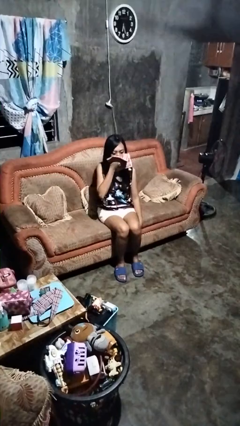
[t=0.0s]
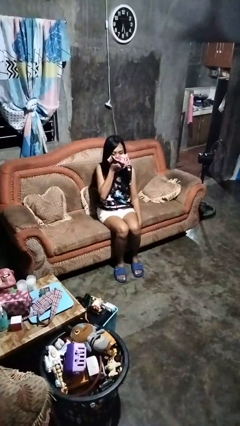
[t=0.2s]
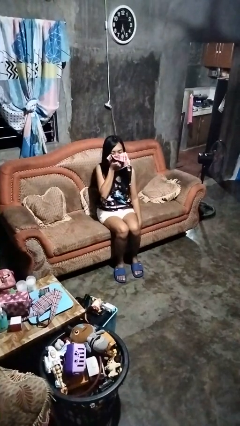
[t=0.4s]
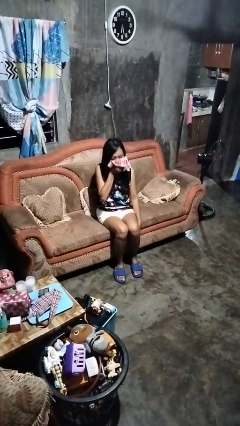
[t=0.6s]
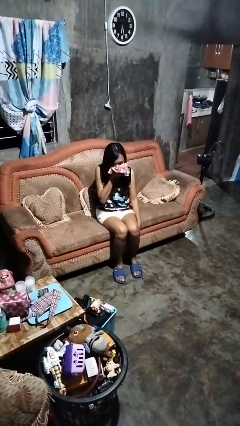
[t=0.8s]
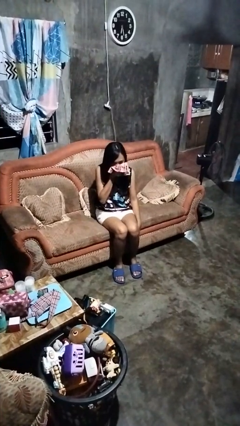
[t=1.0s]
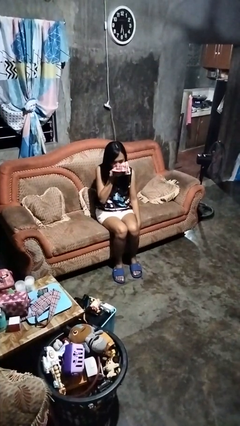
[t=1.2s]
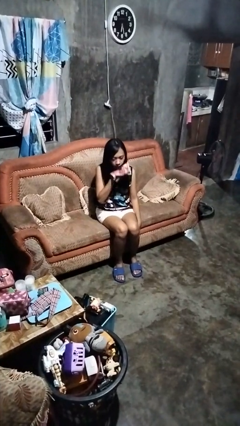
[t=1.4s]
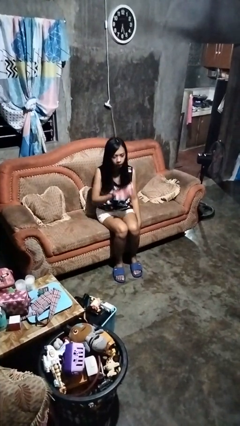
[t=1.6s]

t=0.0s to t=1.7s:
person blows nose

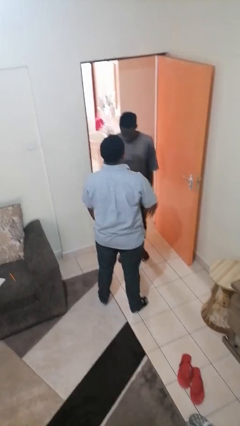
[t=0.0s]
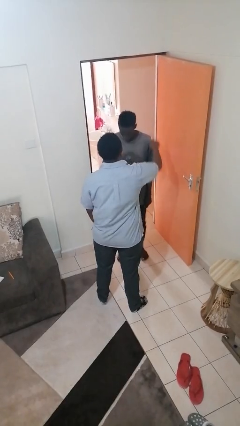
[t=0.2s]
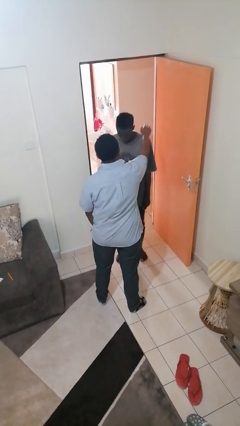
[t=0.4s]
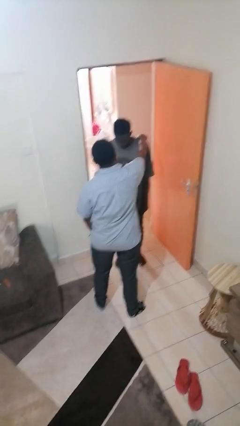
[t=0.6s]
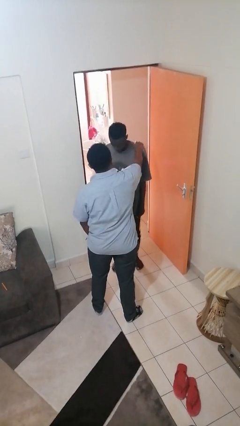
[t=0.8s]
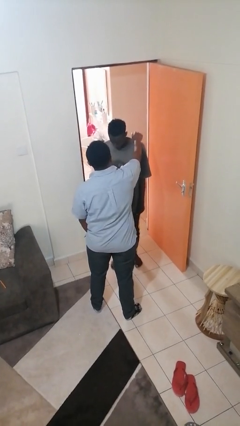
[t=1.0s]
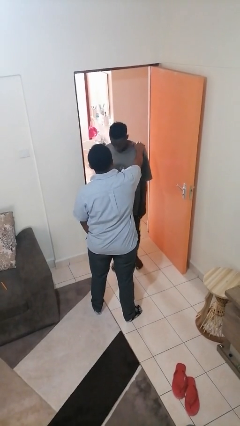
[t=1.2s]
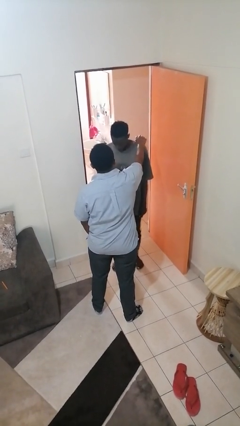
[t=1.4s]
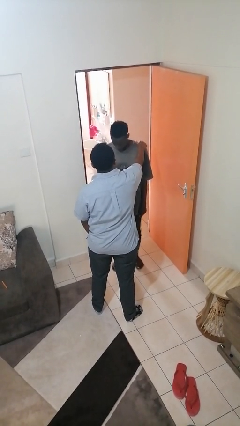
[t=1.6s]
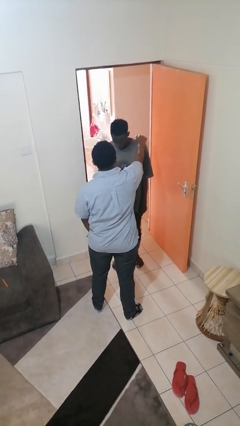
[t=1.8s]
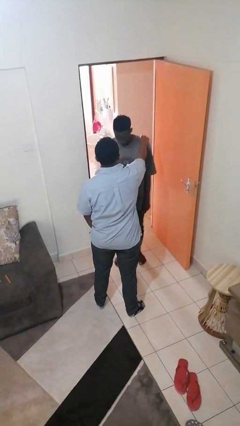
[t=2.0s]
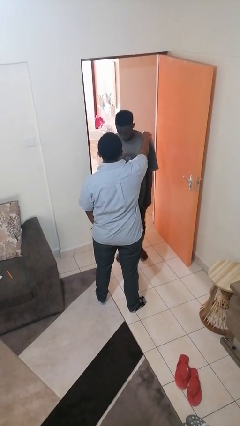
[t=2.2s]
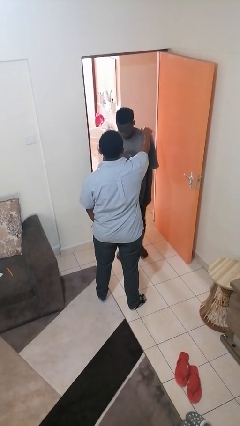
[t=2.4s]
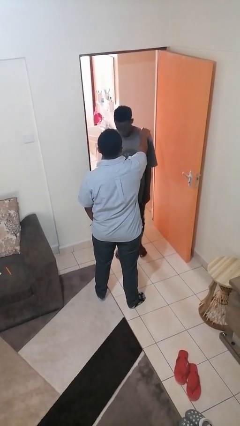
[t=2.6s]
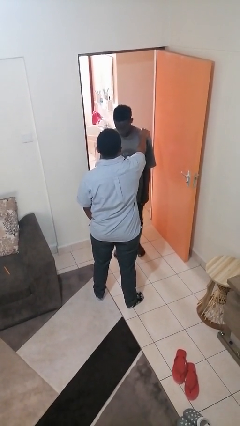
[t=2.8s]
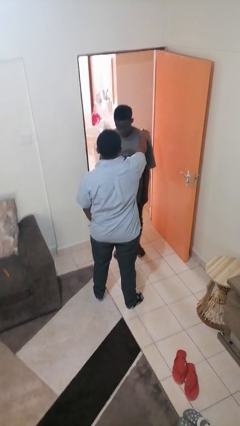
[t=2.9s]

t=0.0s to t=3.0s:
person pounds shoulders of person

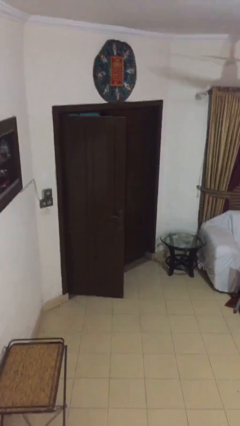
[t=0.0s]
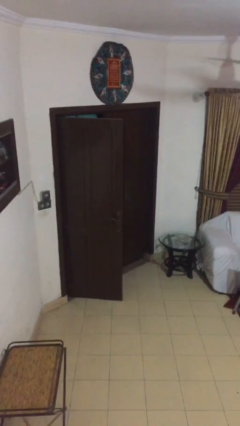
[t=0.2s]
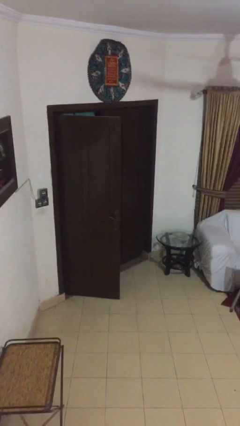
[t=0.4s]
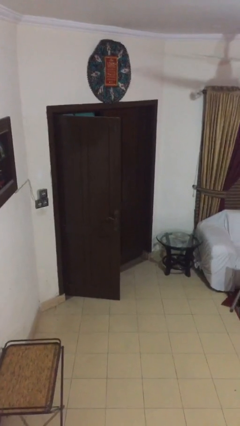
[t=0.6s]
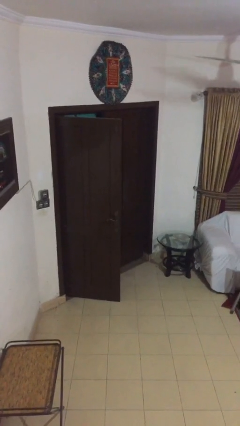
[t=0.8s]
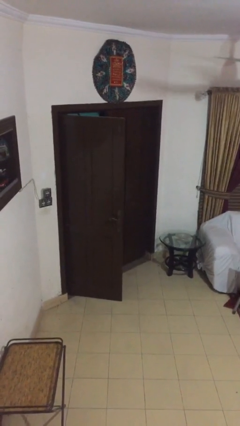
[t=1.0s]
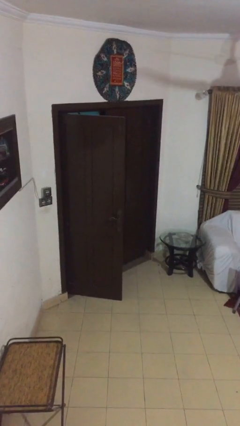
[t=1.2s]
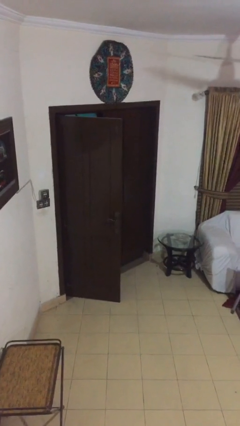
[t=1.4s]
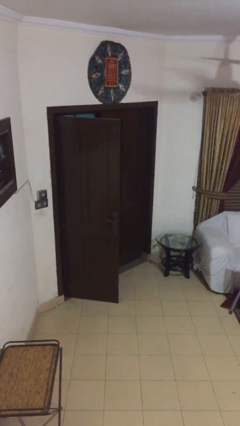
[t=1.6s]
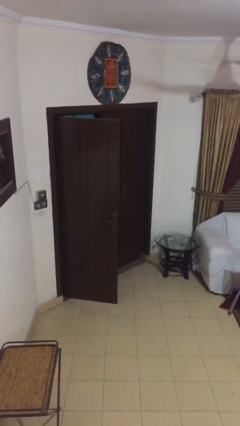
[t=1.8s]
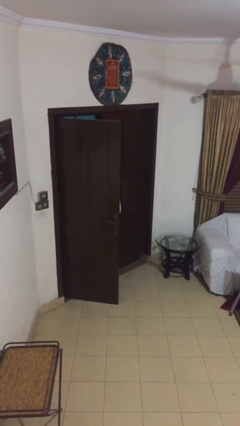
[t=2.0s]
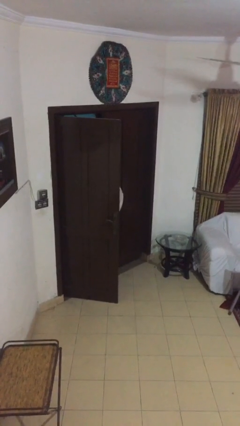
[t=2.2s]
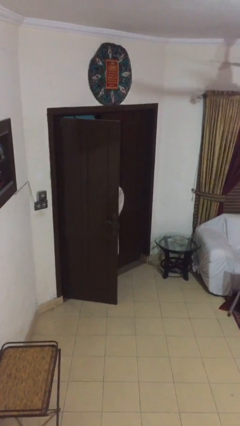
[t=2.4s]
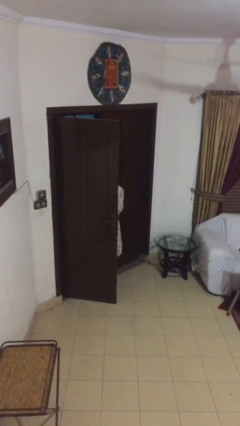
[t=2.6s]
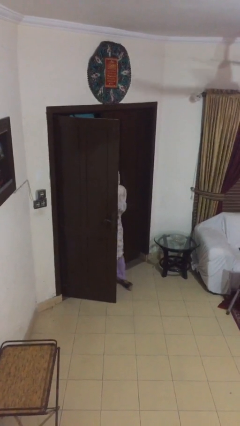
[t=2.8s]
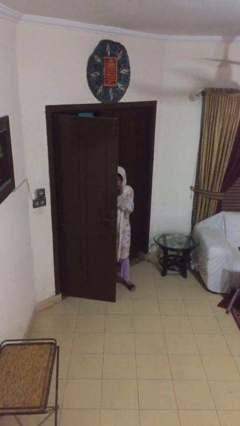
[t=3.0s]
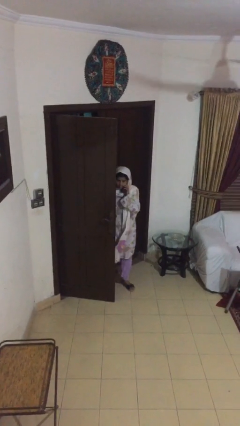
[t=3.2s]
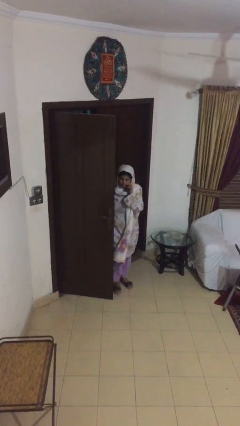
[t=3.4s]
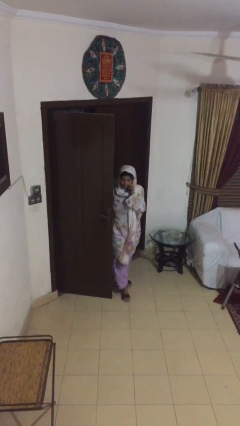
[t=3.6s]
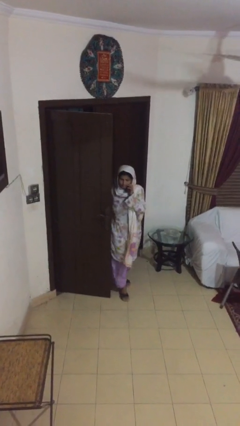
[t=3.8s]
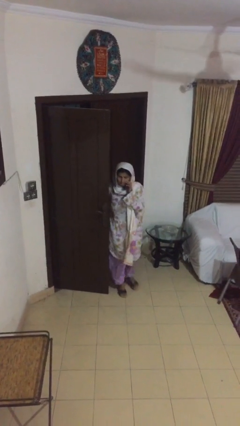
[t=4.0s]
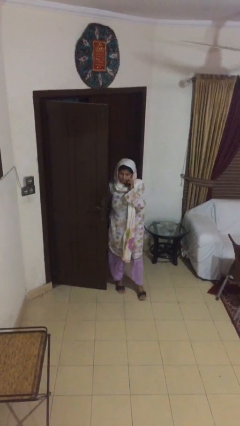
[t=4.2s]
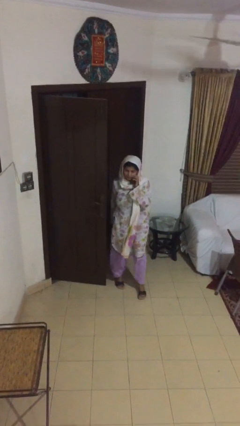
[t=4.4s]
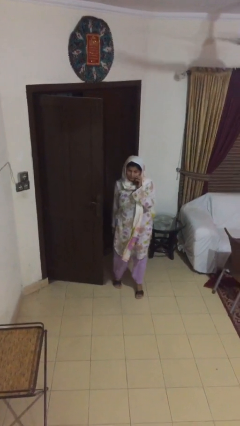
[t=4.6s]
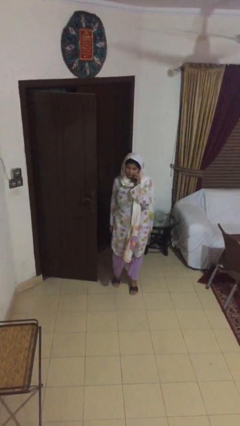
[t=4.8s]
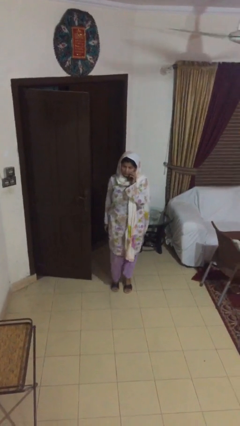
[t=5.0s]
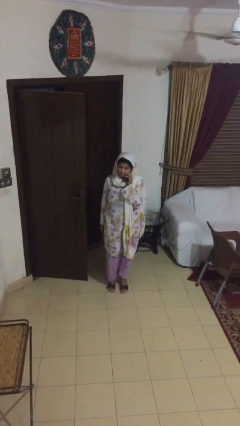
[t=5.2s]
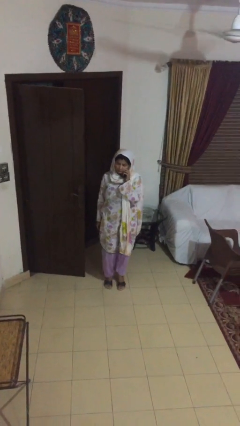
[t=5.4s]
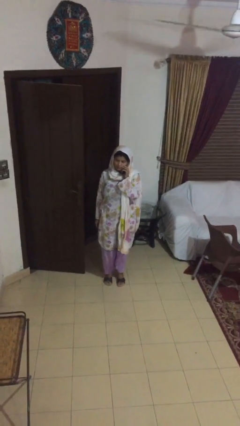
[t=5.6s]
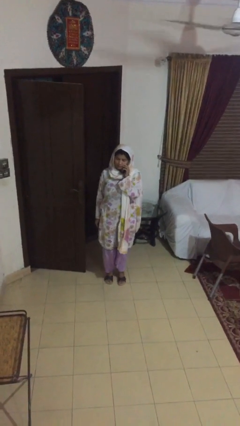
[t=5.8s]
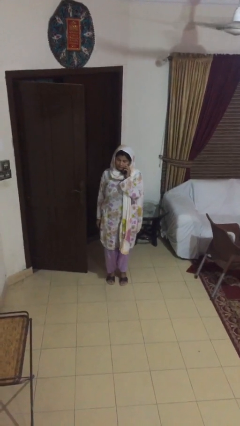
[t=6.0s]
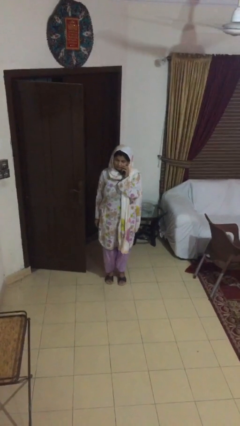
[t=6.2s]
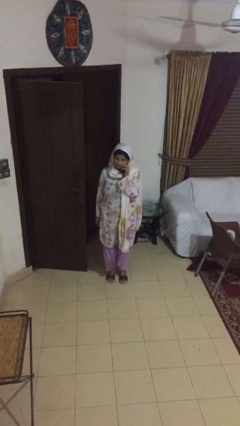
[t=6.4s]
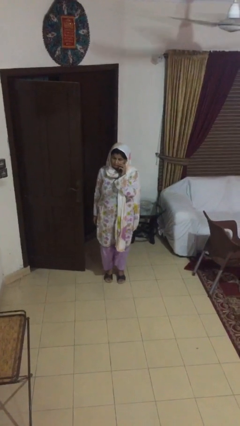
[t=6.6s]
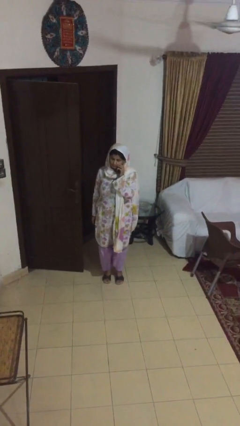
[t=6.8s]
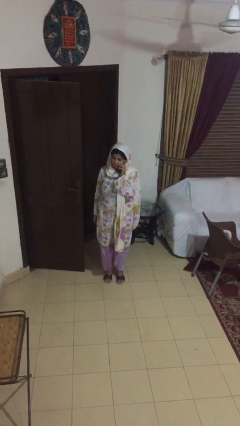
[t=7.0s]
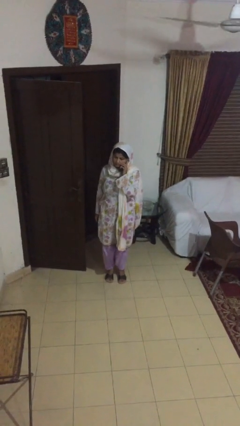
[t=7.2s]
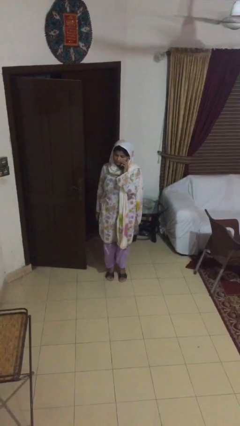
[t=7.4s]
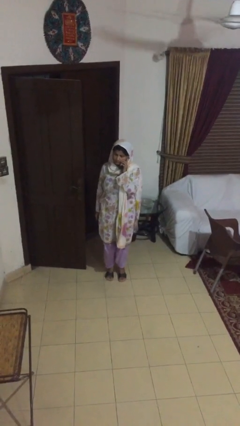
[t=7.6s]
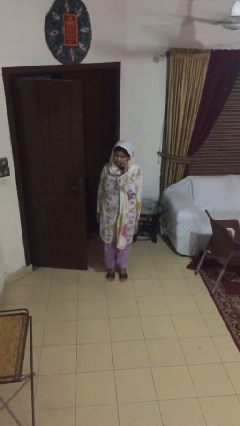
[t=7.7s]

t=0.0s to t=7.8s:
person enters scene through structure

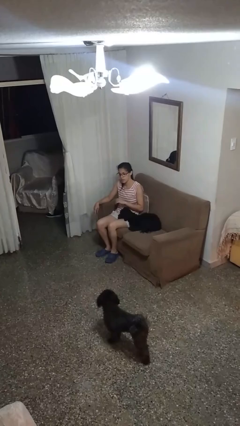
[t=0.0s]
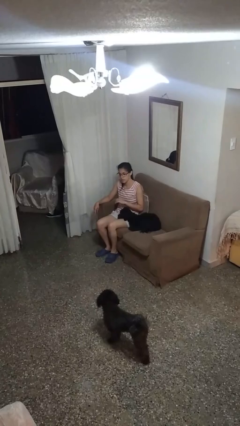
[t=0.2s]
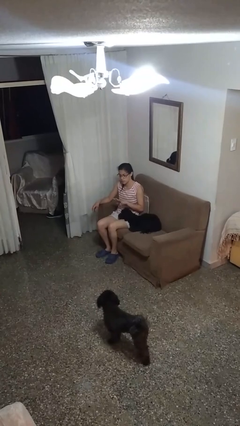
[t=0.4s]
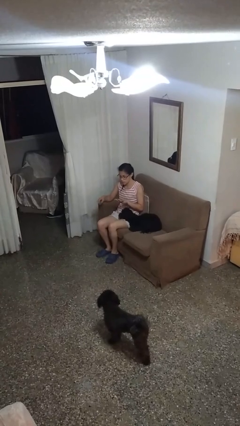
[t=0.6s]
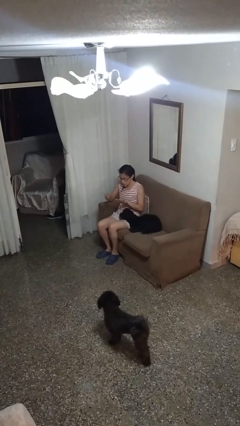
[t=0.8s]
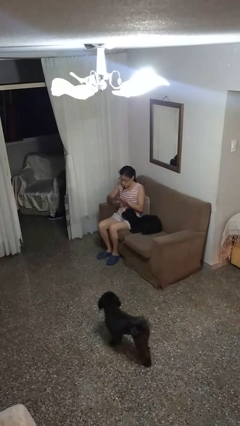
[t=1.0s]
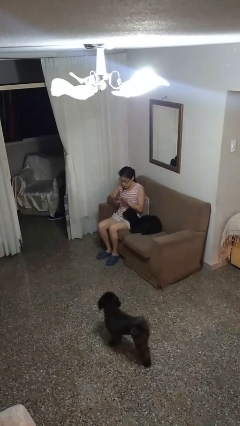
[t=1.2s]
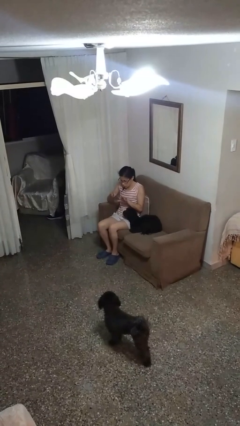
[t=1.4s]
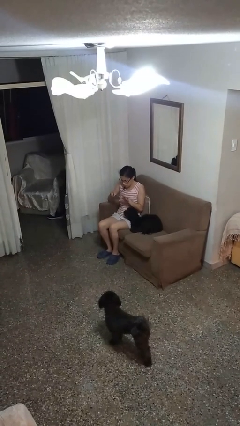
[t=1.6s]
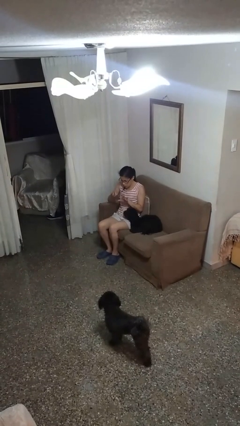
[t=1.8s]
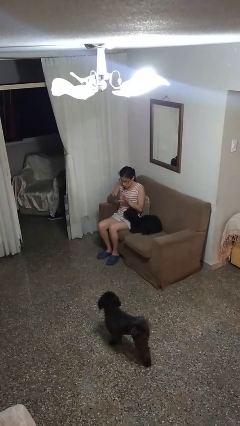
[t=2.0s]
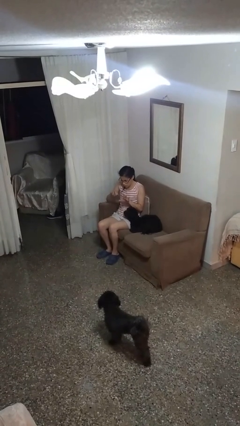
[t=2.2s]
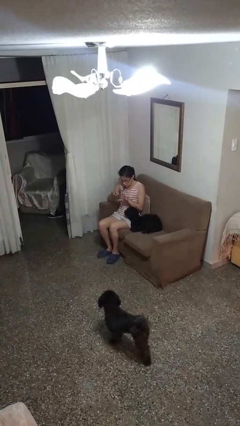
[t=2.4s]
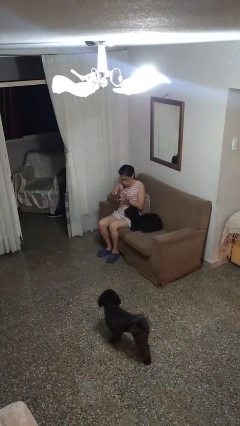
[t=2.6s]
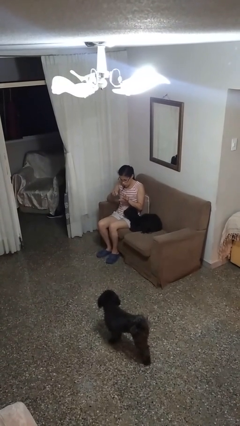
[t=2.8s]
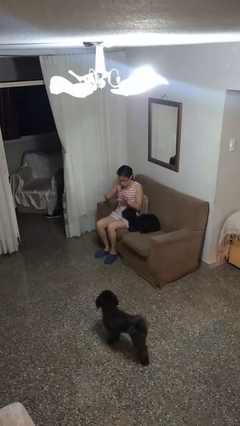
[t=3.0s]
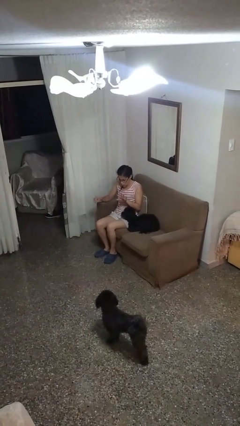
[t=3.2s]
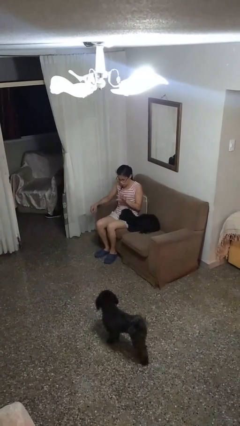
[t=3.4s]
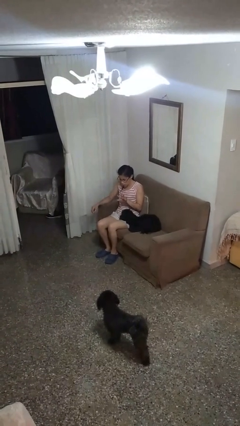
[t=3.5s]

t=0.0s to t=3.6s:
person files fingernails

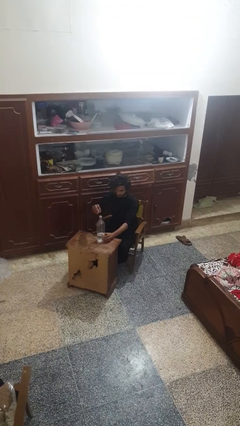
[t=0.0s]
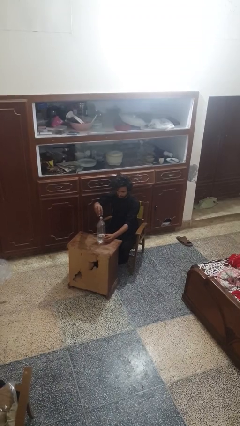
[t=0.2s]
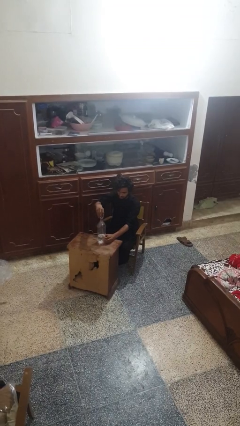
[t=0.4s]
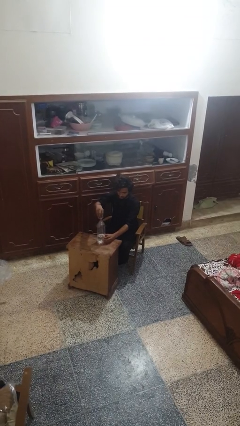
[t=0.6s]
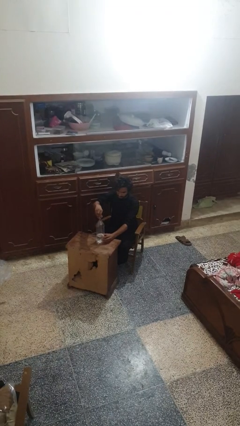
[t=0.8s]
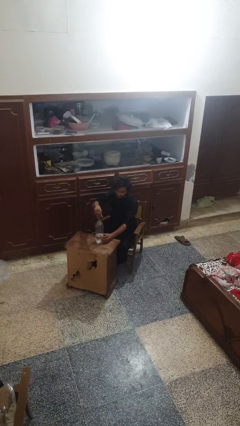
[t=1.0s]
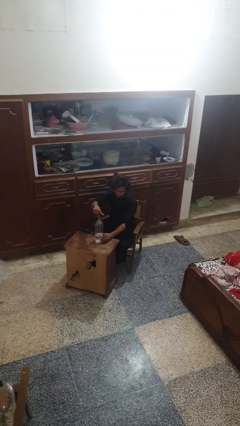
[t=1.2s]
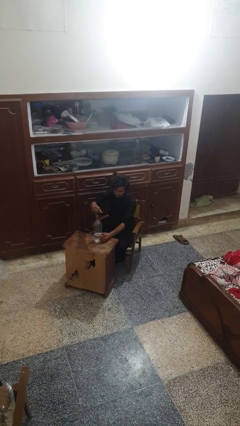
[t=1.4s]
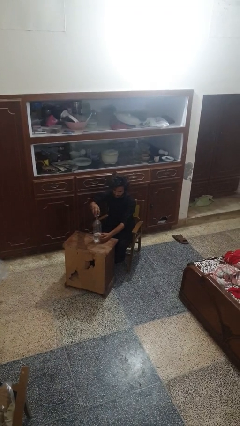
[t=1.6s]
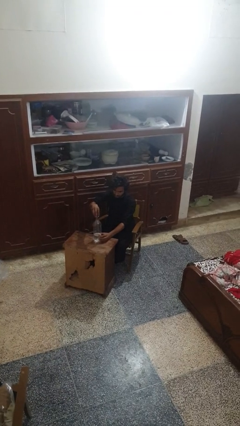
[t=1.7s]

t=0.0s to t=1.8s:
person screws lid to bottle
